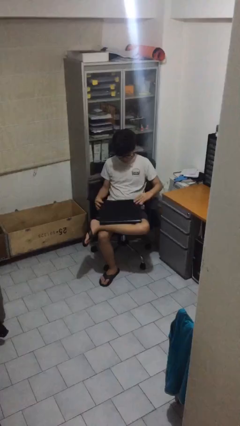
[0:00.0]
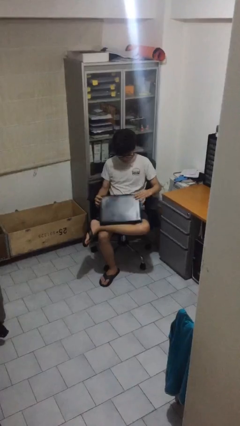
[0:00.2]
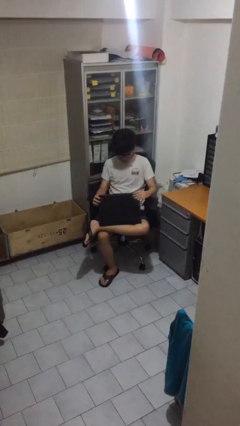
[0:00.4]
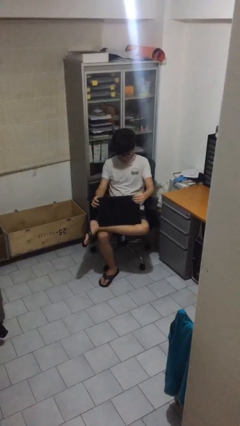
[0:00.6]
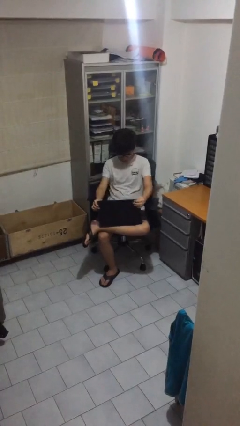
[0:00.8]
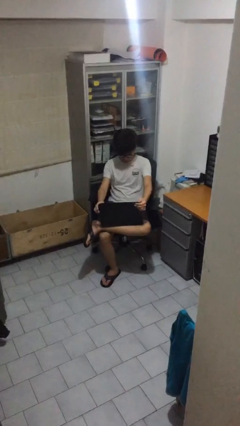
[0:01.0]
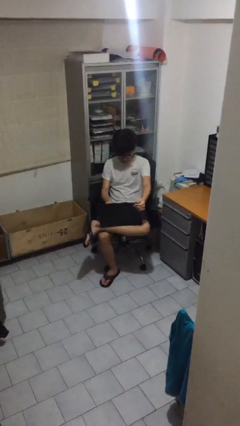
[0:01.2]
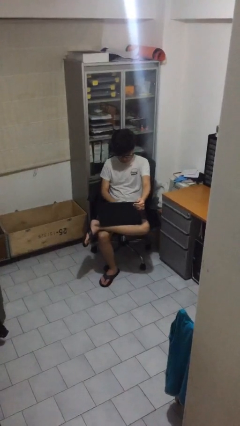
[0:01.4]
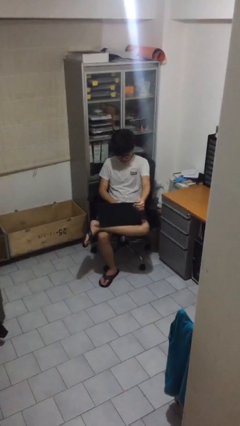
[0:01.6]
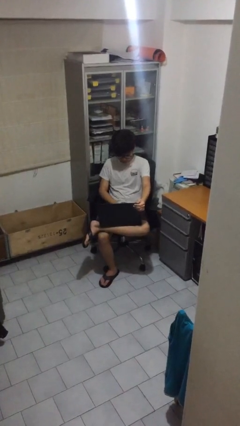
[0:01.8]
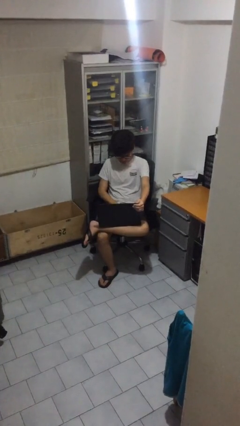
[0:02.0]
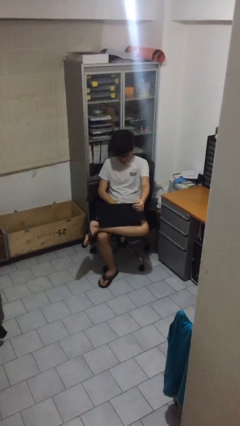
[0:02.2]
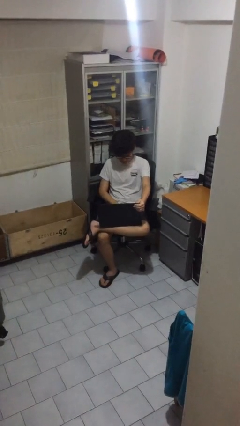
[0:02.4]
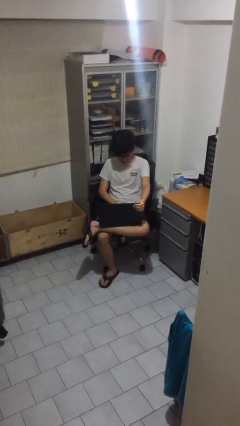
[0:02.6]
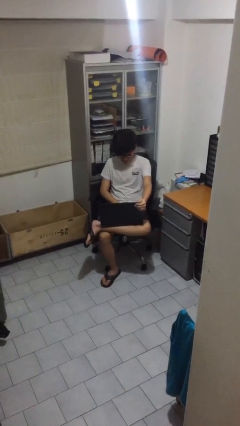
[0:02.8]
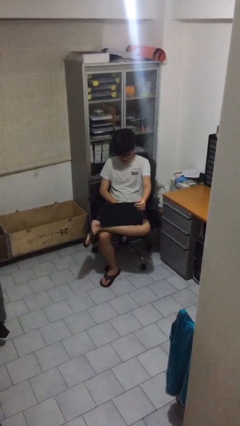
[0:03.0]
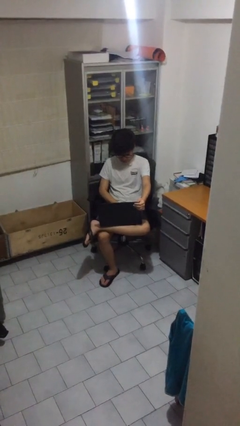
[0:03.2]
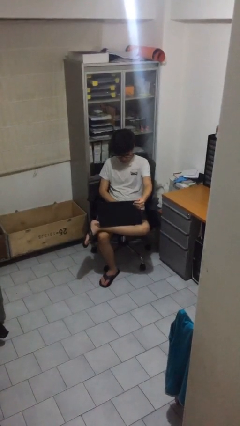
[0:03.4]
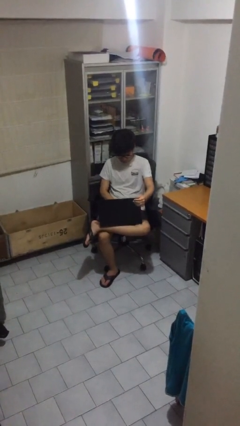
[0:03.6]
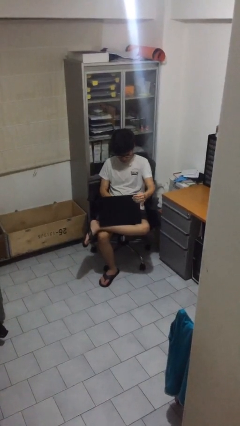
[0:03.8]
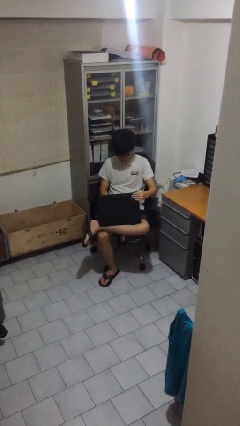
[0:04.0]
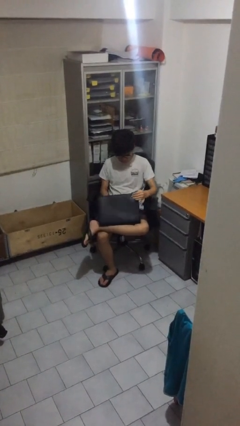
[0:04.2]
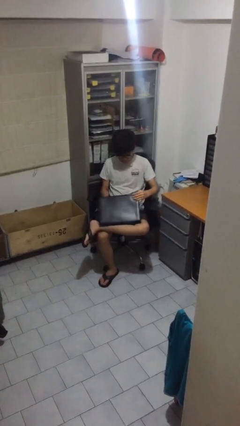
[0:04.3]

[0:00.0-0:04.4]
person interacts with laptop

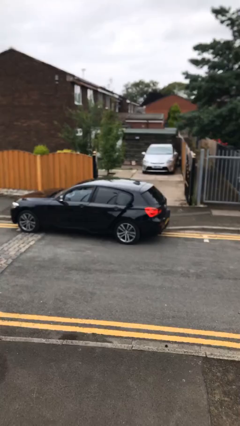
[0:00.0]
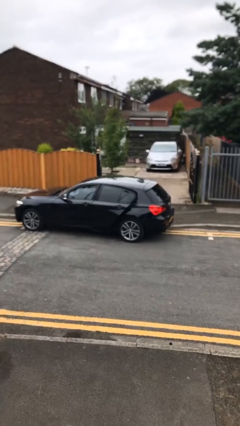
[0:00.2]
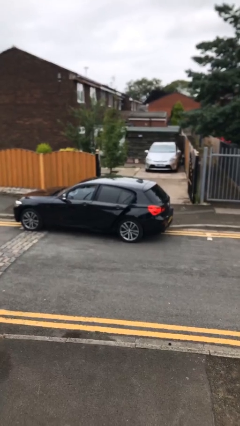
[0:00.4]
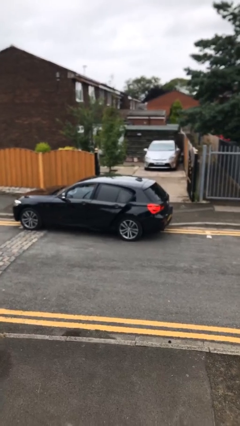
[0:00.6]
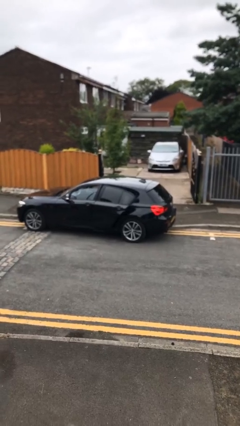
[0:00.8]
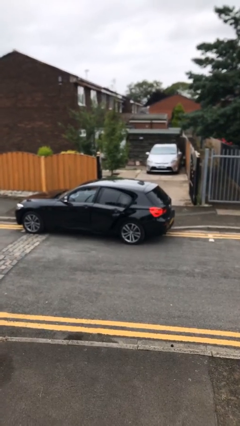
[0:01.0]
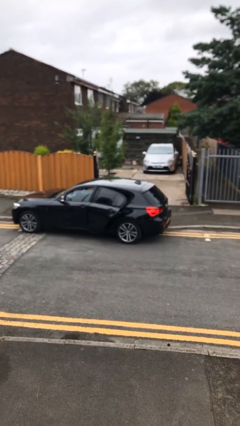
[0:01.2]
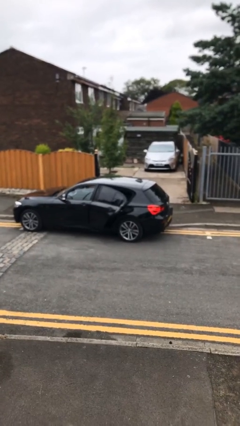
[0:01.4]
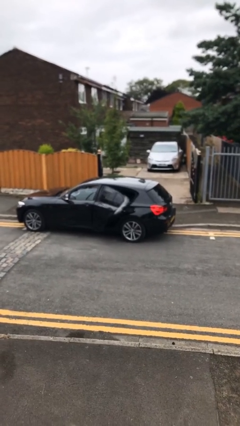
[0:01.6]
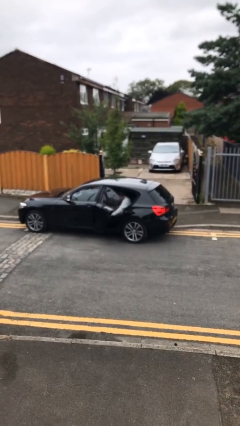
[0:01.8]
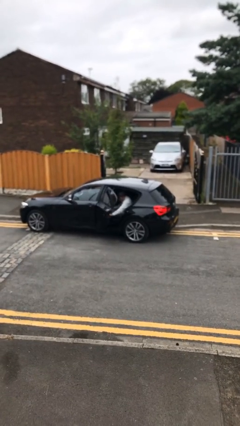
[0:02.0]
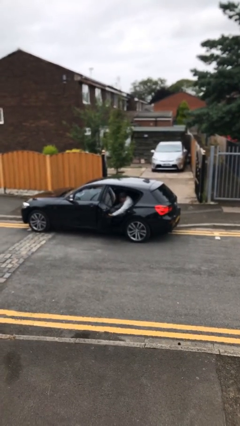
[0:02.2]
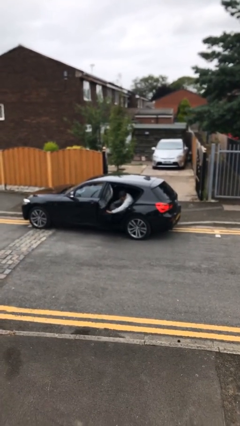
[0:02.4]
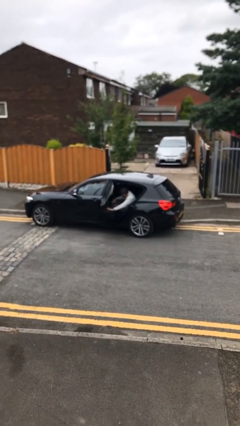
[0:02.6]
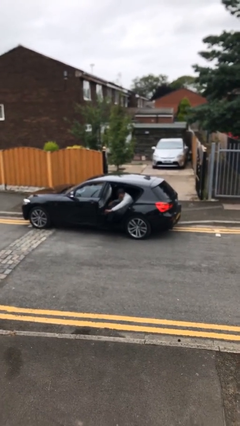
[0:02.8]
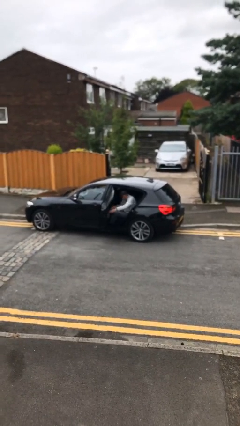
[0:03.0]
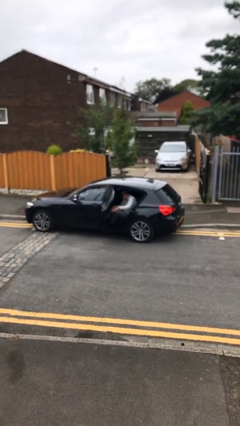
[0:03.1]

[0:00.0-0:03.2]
person opens car door

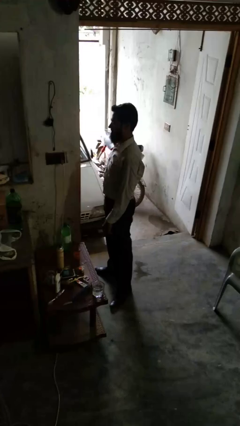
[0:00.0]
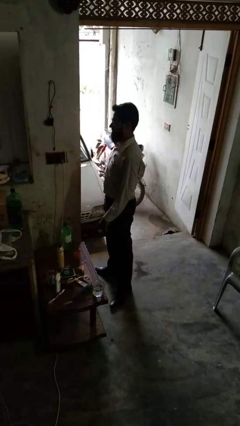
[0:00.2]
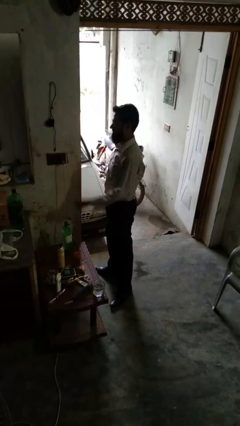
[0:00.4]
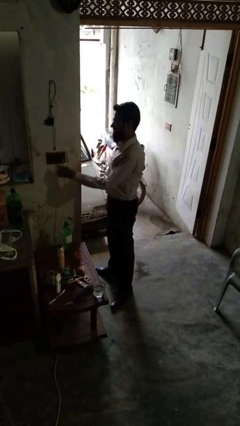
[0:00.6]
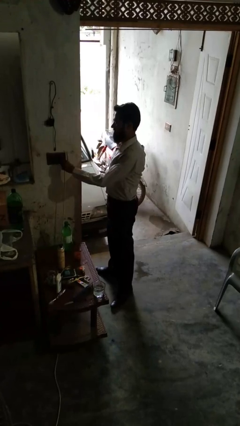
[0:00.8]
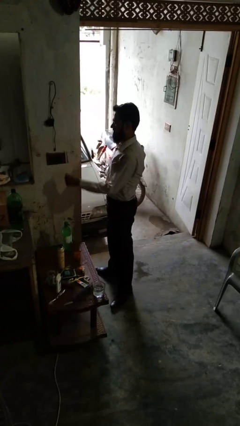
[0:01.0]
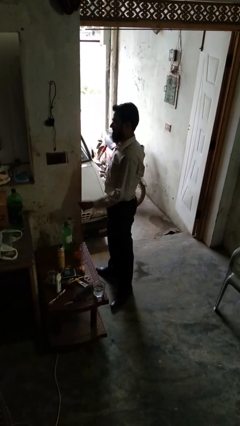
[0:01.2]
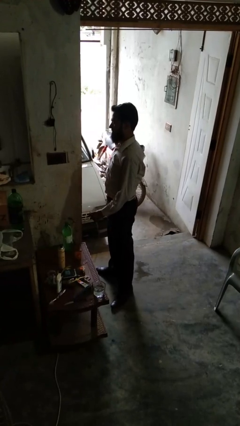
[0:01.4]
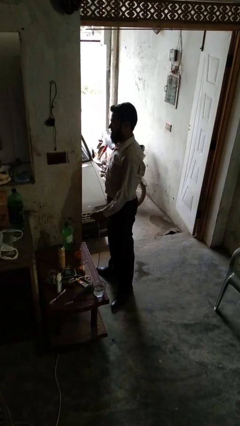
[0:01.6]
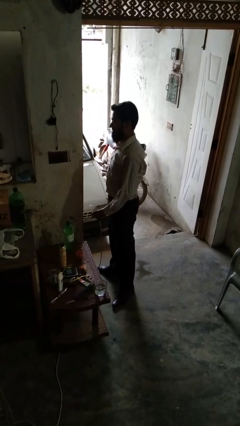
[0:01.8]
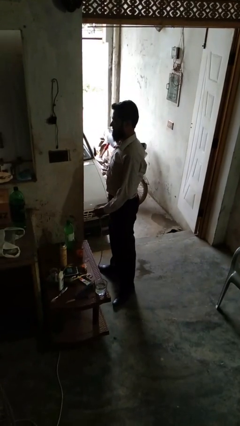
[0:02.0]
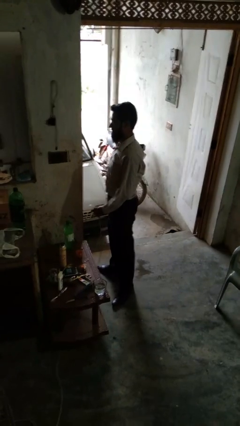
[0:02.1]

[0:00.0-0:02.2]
person unplugs from electrical socket

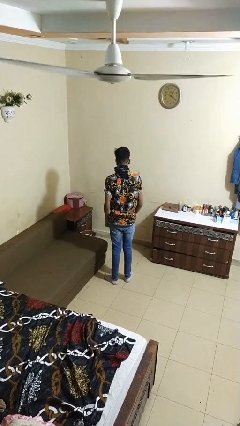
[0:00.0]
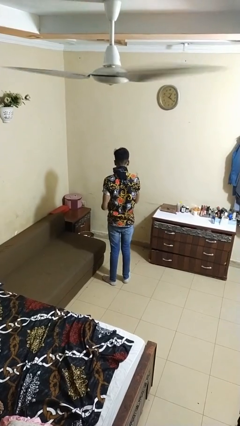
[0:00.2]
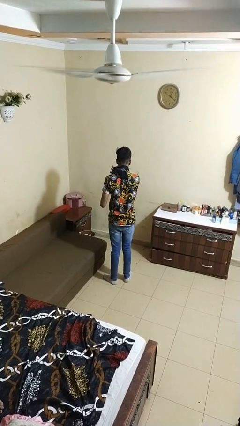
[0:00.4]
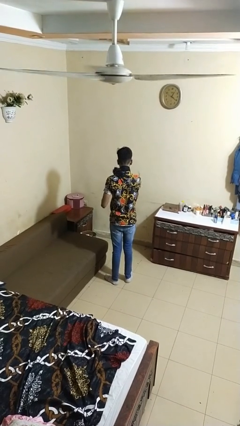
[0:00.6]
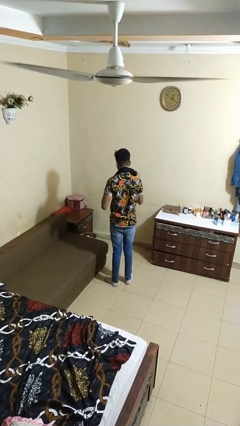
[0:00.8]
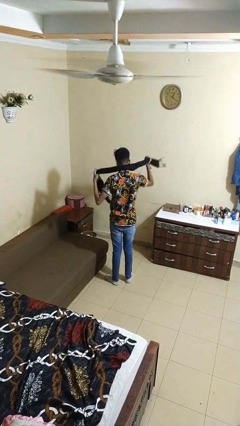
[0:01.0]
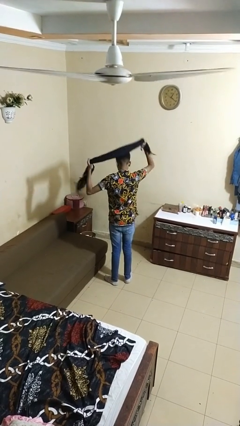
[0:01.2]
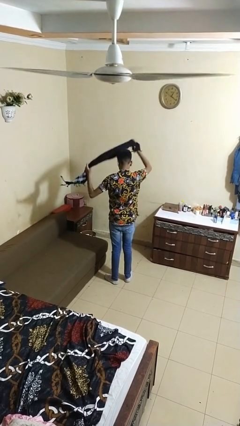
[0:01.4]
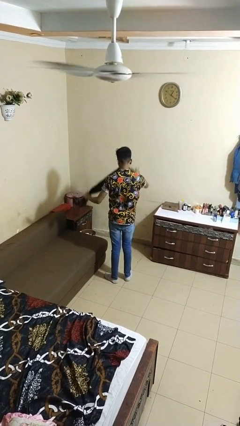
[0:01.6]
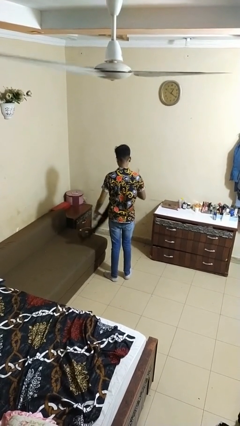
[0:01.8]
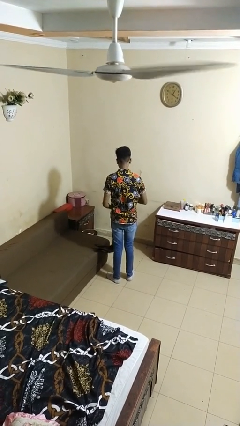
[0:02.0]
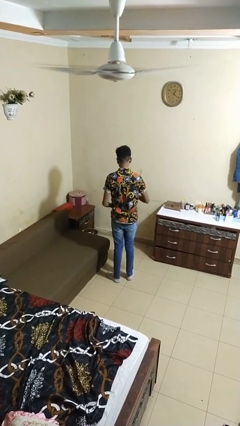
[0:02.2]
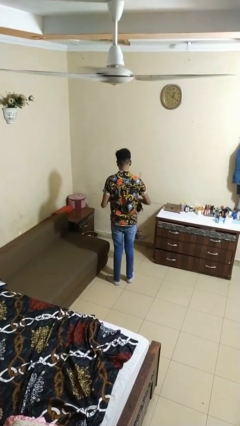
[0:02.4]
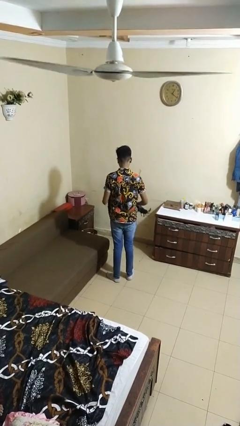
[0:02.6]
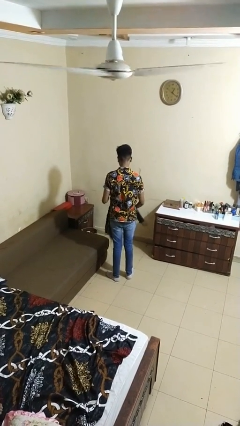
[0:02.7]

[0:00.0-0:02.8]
person takes off scarf

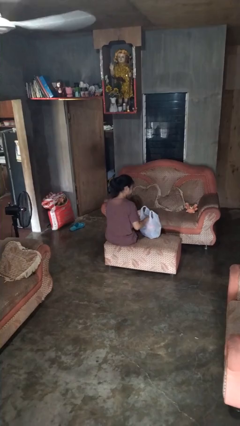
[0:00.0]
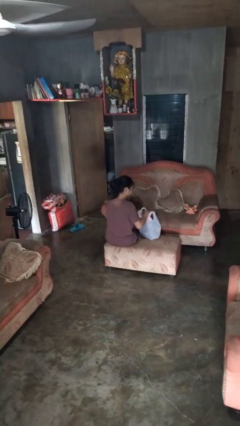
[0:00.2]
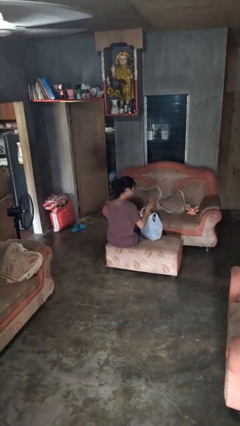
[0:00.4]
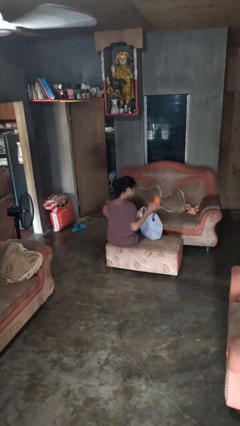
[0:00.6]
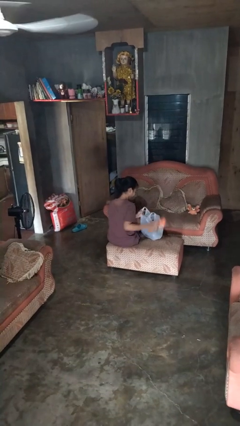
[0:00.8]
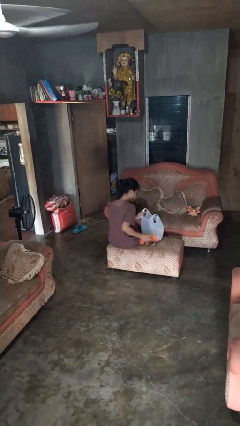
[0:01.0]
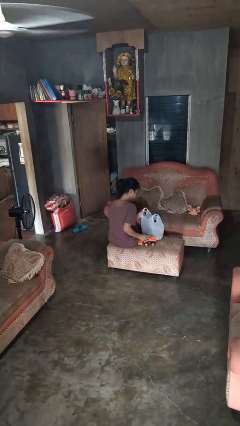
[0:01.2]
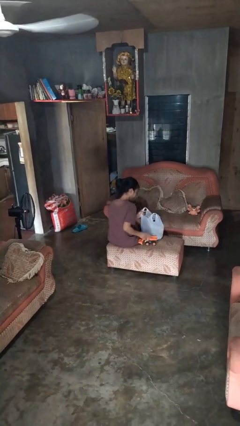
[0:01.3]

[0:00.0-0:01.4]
person takes object from bag

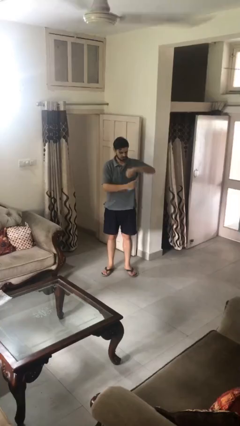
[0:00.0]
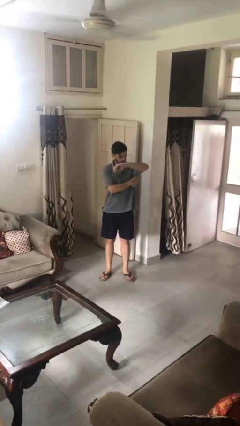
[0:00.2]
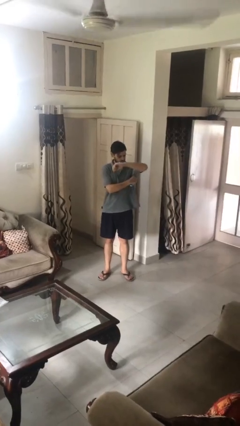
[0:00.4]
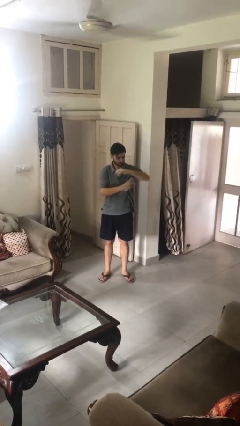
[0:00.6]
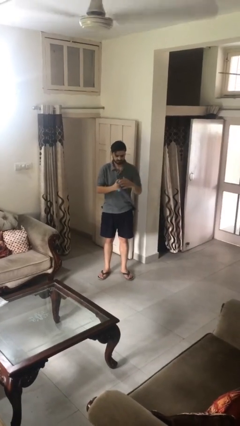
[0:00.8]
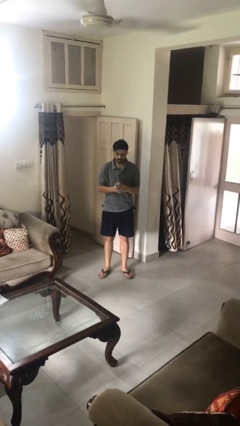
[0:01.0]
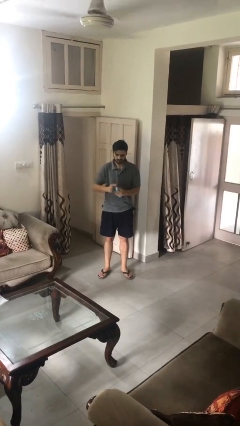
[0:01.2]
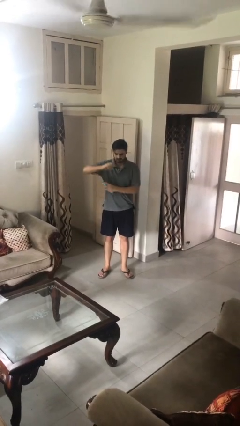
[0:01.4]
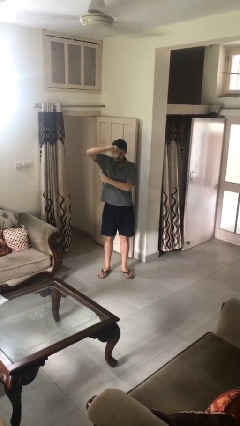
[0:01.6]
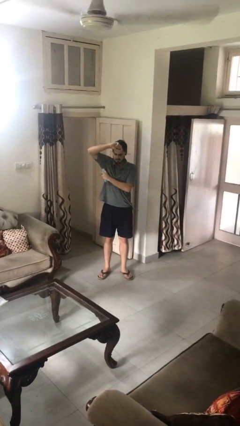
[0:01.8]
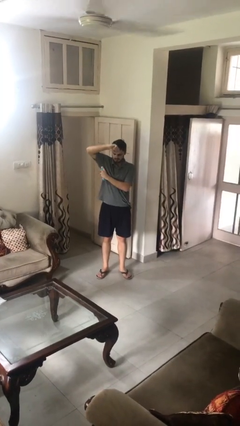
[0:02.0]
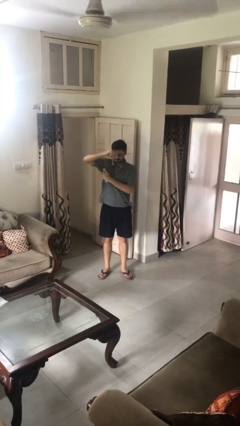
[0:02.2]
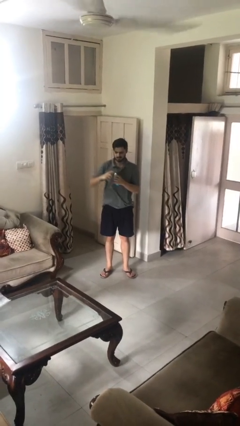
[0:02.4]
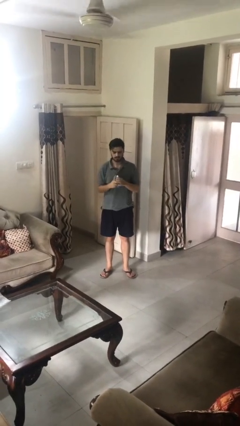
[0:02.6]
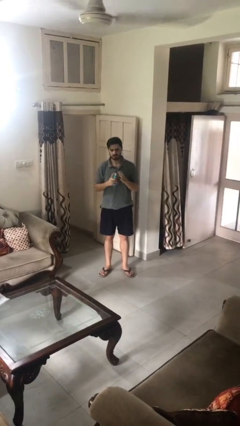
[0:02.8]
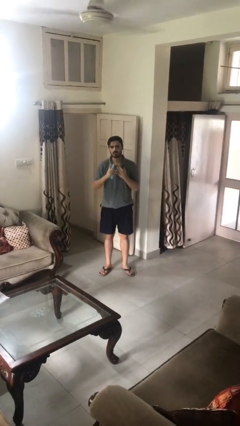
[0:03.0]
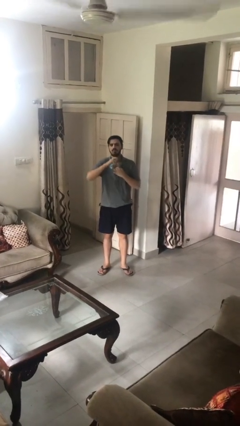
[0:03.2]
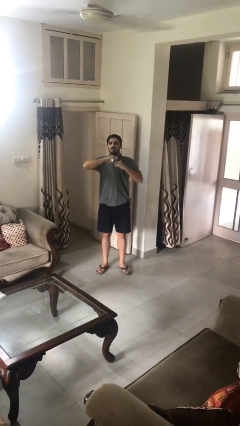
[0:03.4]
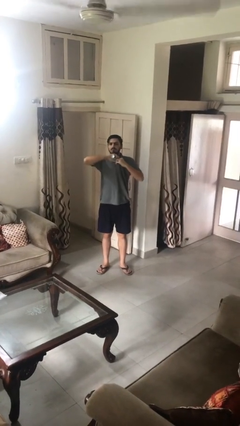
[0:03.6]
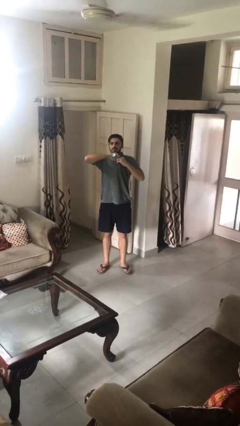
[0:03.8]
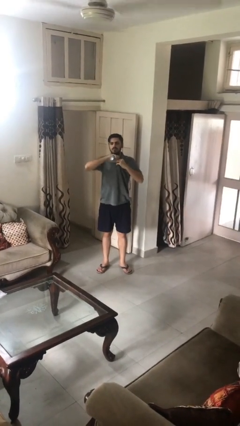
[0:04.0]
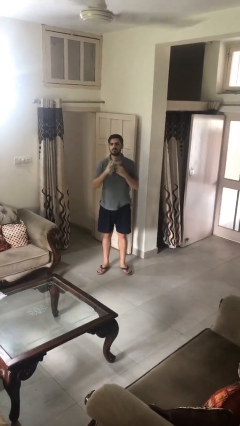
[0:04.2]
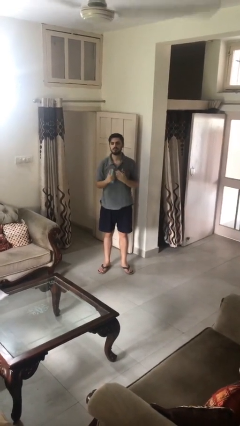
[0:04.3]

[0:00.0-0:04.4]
person applies deodorant
